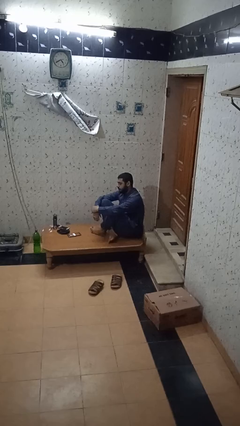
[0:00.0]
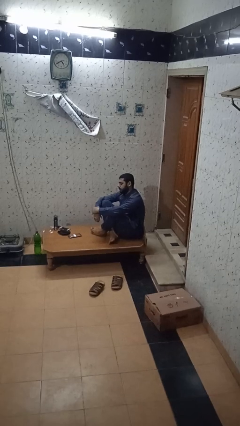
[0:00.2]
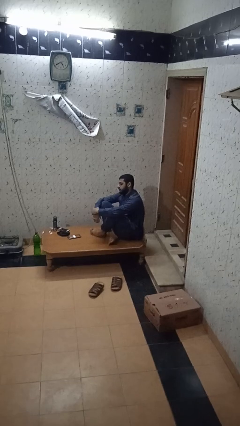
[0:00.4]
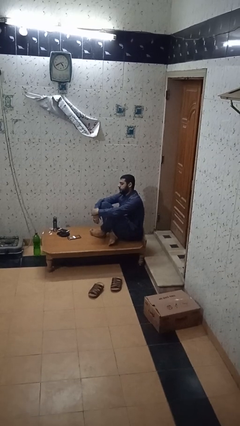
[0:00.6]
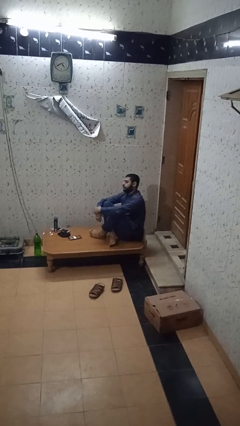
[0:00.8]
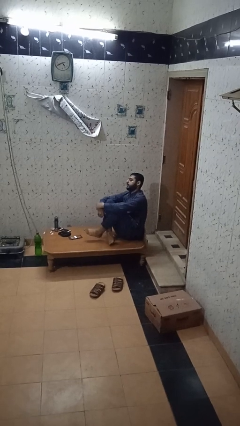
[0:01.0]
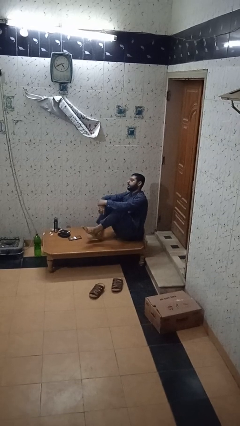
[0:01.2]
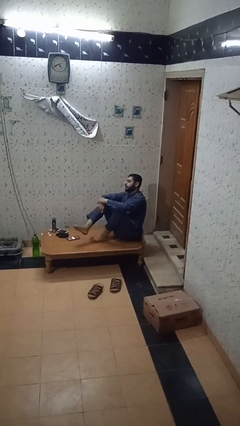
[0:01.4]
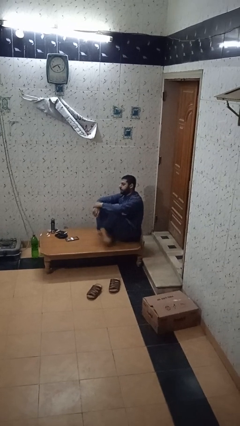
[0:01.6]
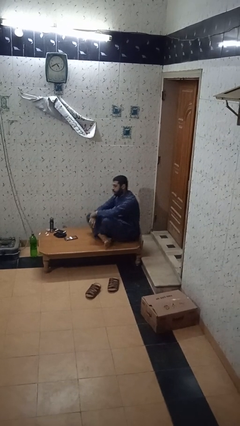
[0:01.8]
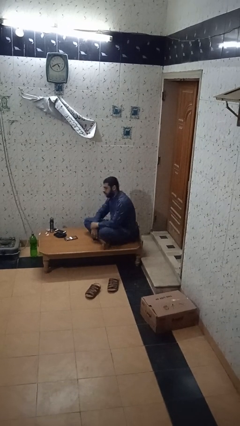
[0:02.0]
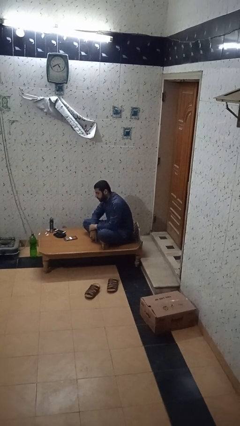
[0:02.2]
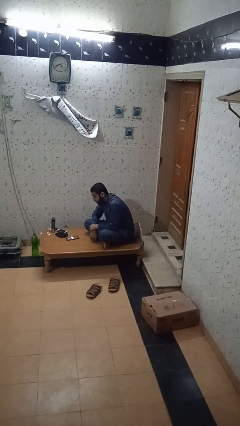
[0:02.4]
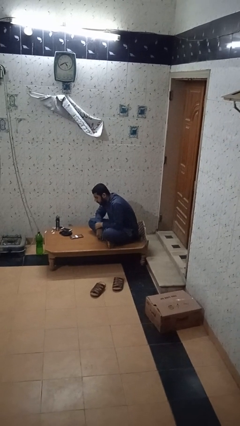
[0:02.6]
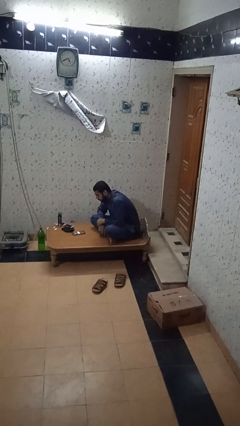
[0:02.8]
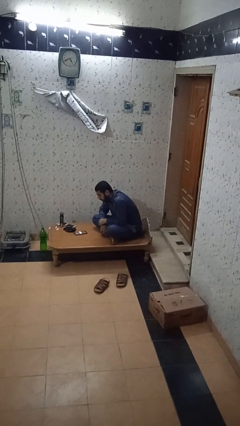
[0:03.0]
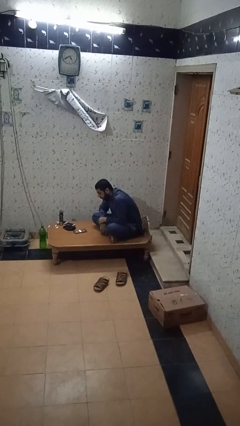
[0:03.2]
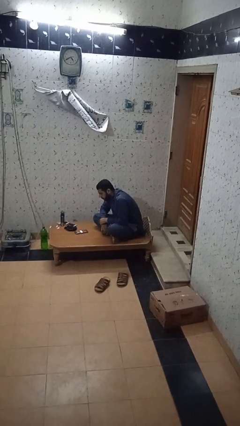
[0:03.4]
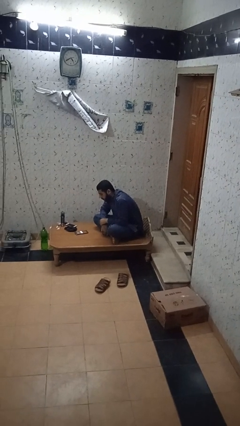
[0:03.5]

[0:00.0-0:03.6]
person crosses legs

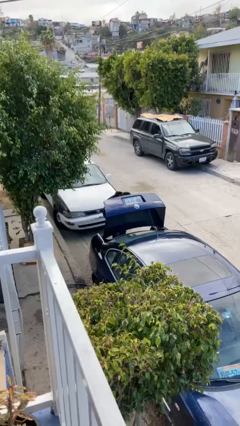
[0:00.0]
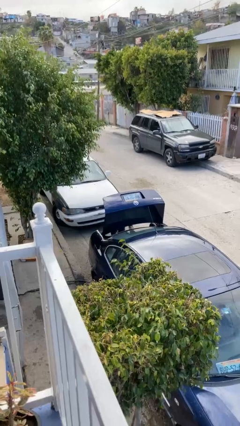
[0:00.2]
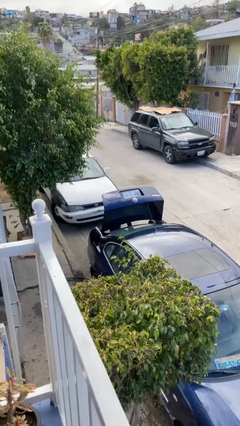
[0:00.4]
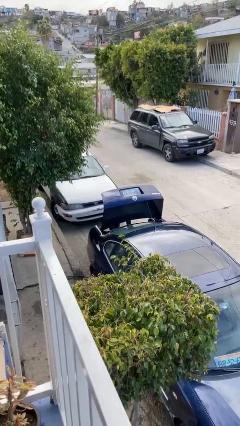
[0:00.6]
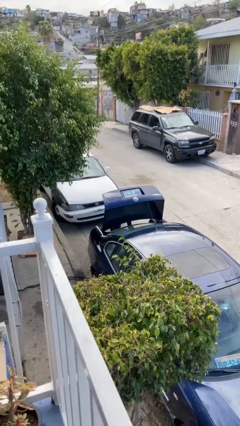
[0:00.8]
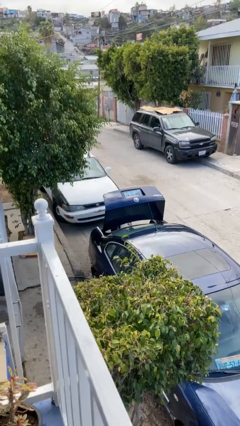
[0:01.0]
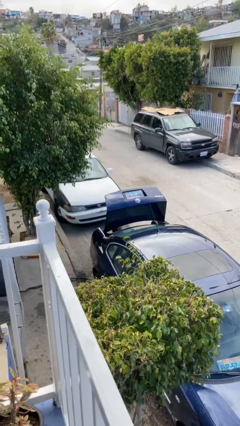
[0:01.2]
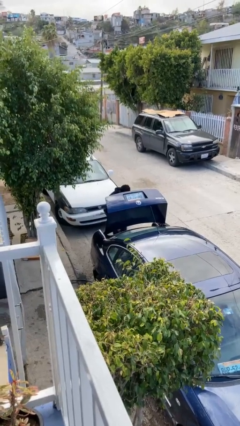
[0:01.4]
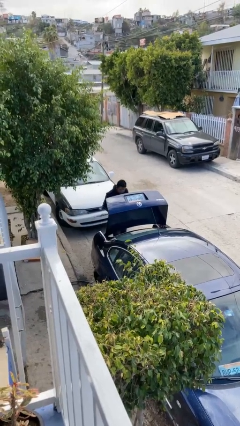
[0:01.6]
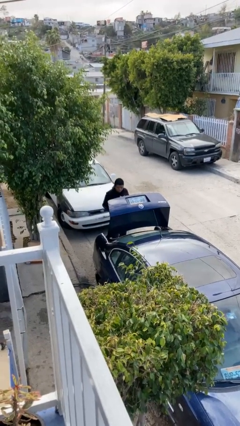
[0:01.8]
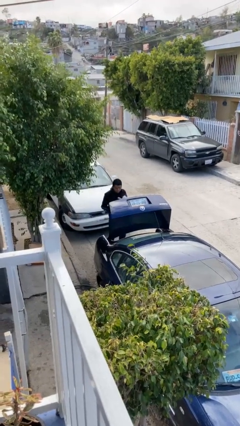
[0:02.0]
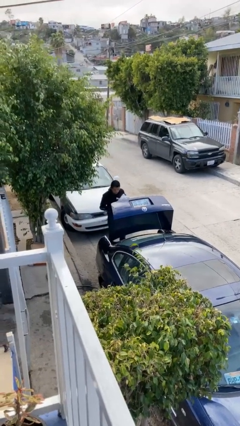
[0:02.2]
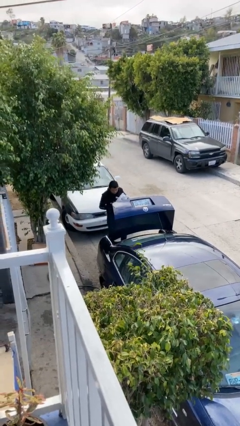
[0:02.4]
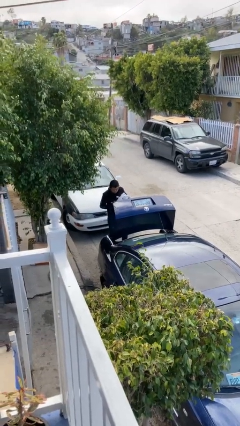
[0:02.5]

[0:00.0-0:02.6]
person unloads car

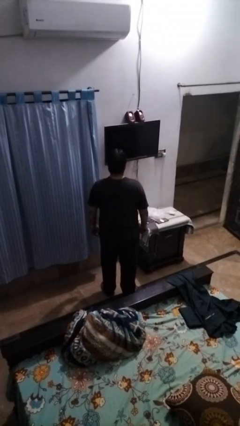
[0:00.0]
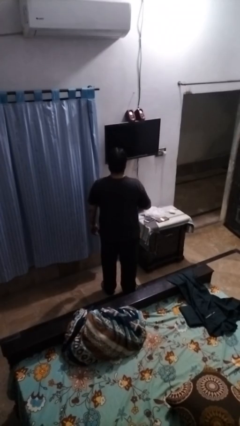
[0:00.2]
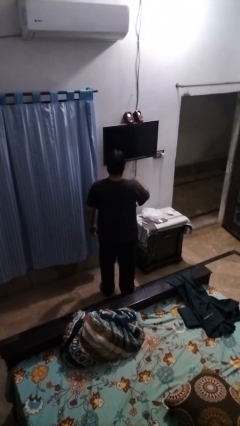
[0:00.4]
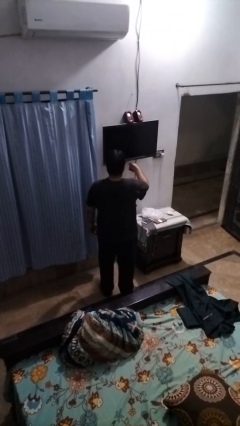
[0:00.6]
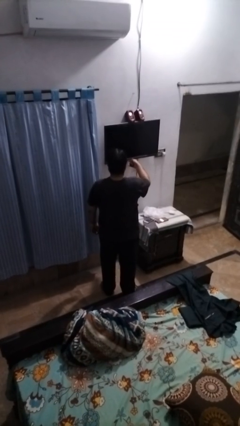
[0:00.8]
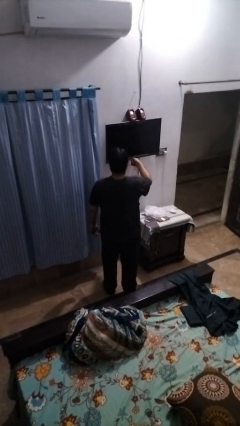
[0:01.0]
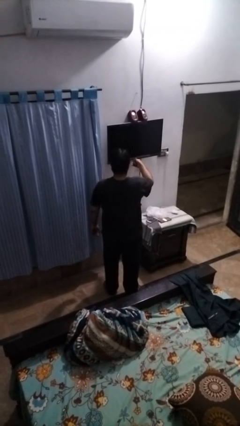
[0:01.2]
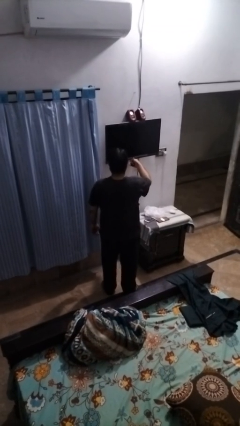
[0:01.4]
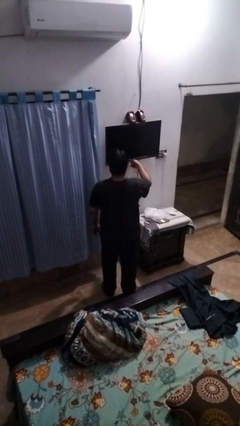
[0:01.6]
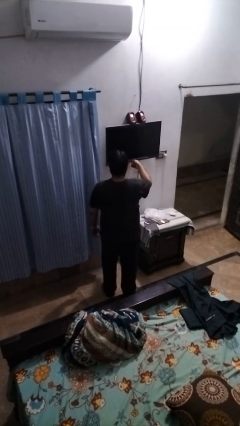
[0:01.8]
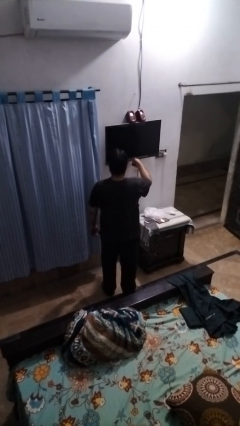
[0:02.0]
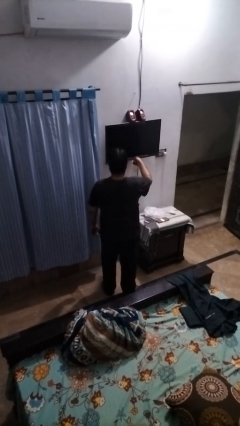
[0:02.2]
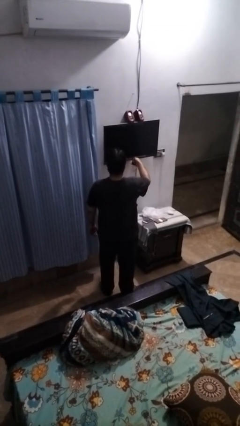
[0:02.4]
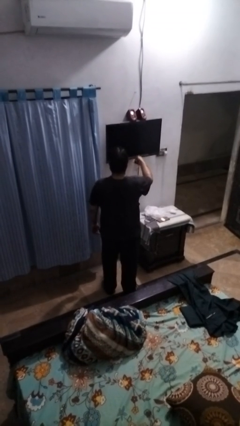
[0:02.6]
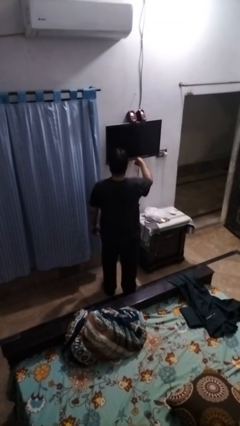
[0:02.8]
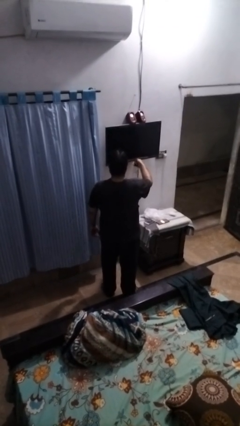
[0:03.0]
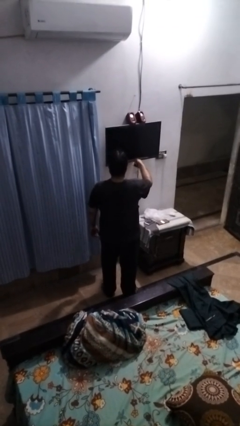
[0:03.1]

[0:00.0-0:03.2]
person uses television remote

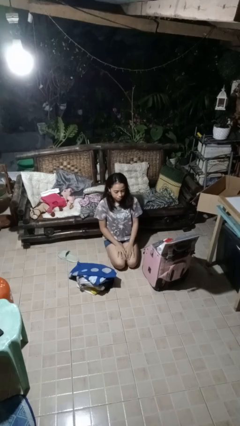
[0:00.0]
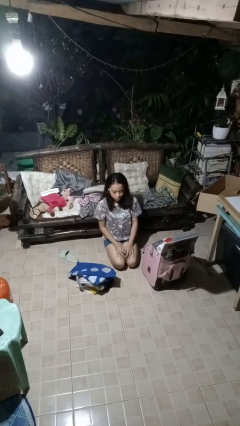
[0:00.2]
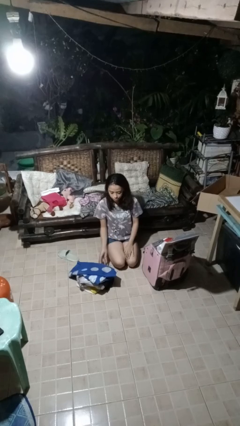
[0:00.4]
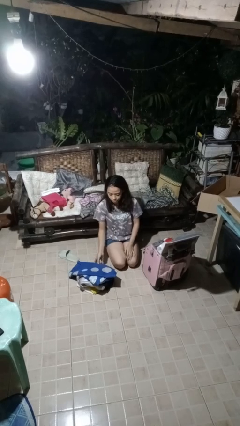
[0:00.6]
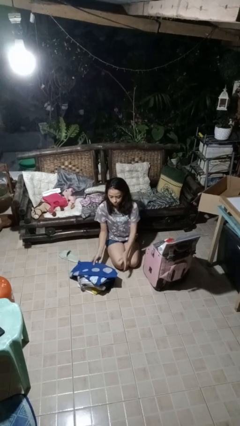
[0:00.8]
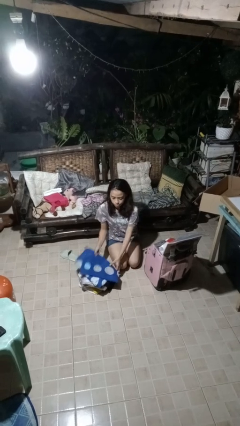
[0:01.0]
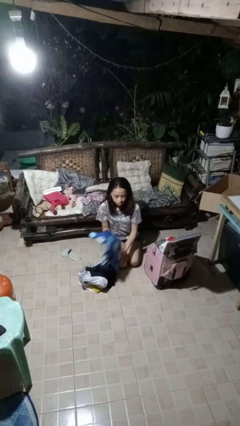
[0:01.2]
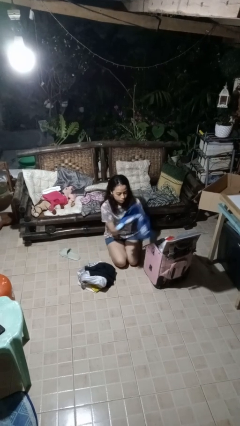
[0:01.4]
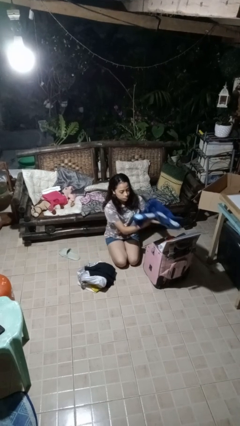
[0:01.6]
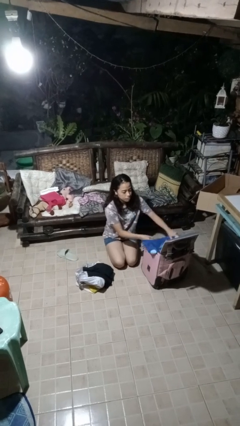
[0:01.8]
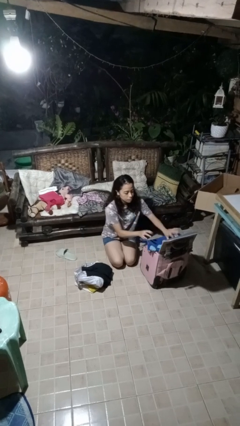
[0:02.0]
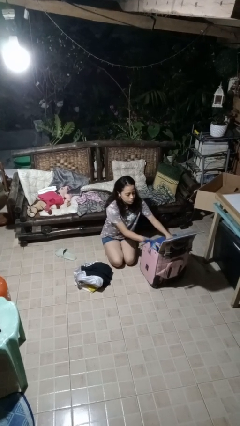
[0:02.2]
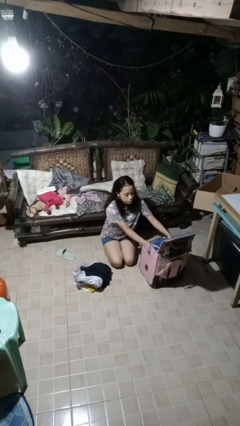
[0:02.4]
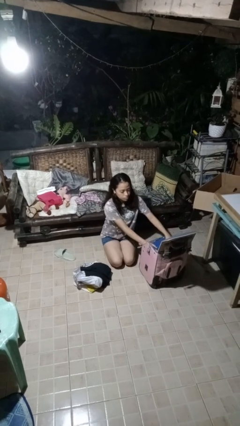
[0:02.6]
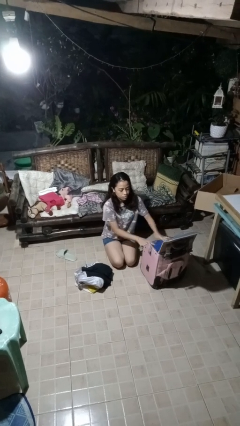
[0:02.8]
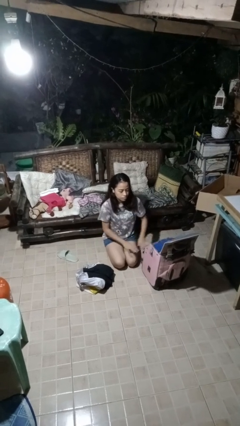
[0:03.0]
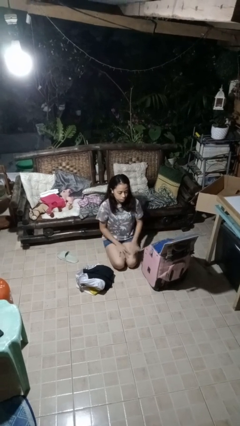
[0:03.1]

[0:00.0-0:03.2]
person loads clothes into suitcase

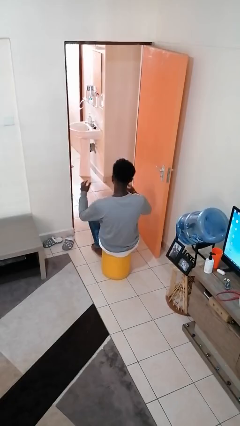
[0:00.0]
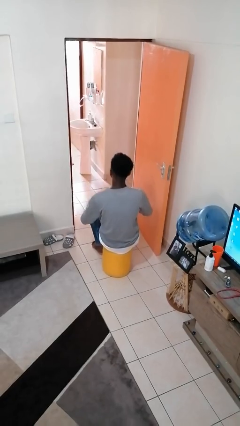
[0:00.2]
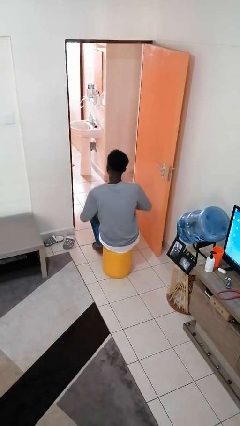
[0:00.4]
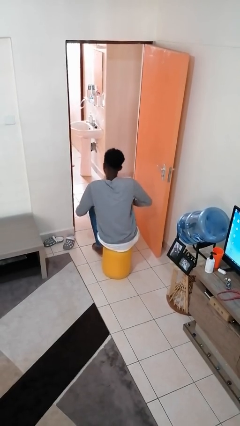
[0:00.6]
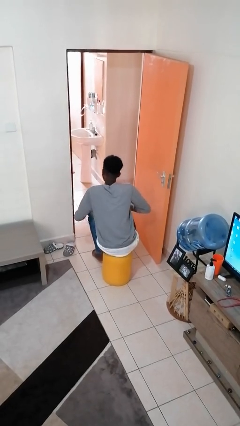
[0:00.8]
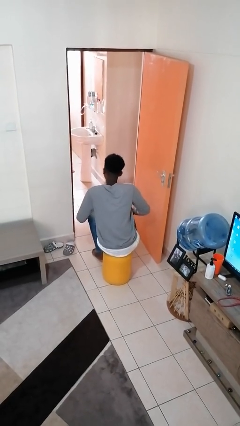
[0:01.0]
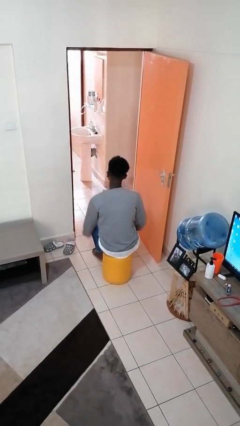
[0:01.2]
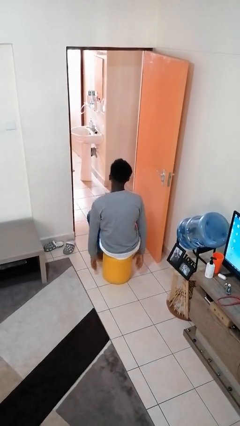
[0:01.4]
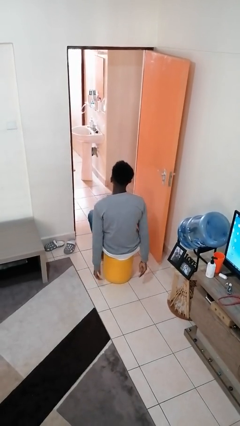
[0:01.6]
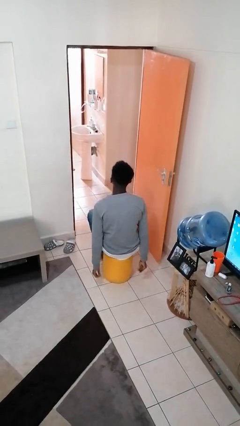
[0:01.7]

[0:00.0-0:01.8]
person slaps hands on thighs

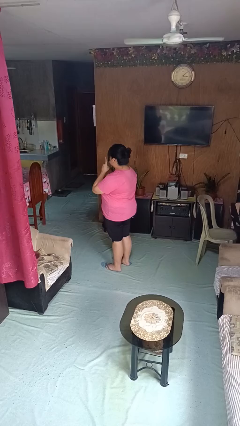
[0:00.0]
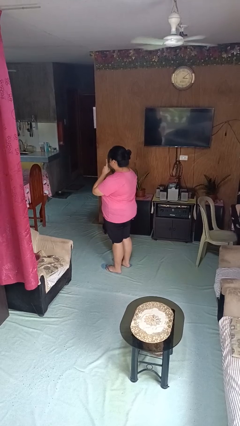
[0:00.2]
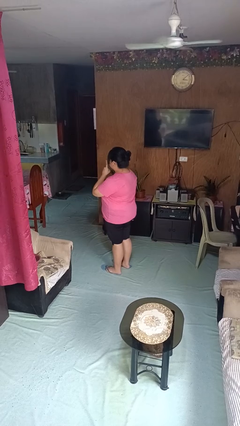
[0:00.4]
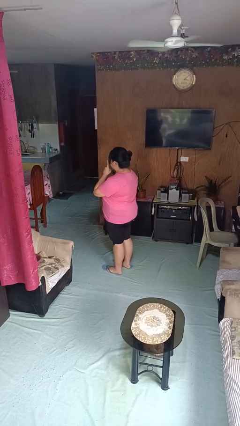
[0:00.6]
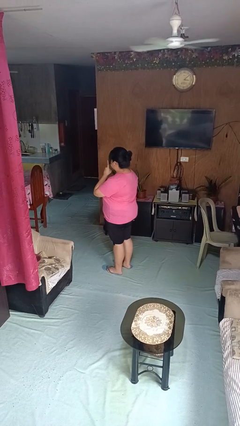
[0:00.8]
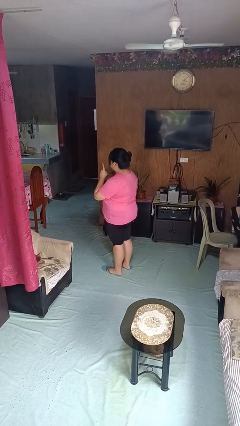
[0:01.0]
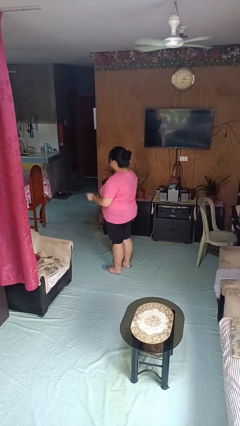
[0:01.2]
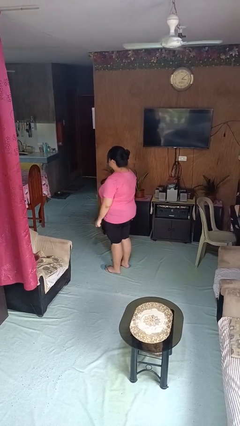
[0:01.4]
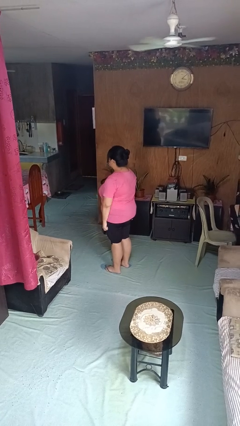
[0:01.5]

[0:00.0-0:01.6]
person gestures be quiet

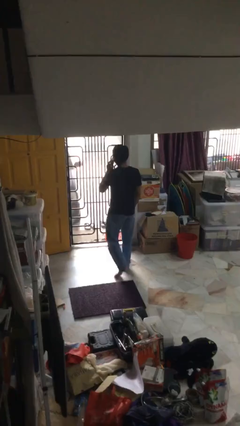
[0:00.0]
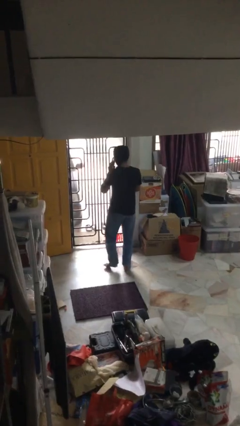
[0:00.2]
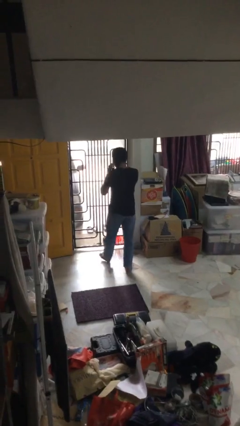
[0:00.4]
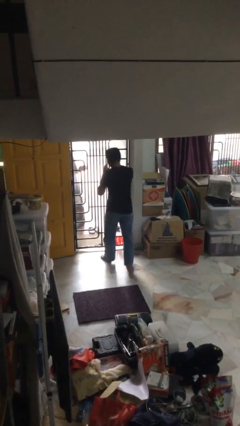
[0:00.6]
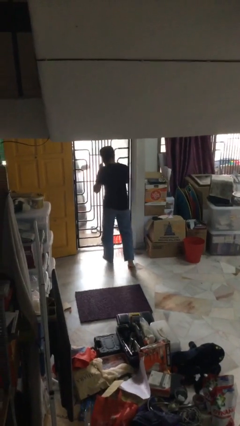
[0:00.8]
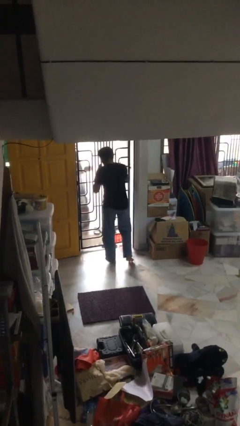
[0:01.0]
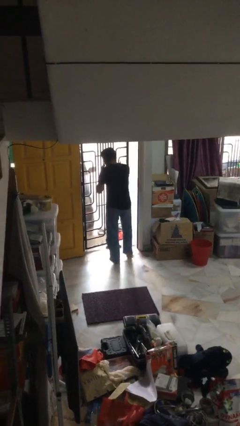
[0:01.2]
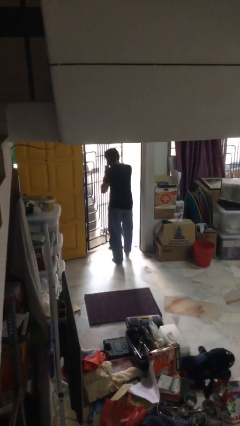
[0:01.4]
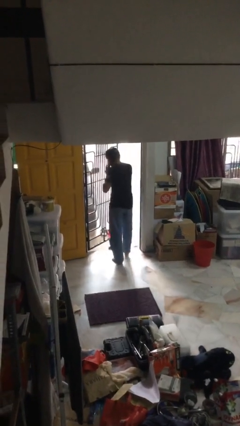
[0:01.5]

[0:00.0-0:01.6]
person opens facility door
